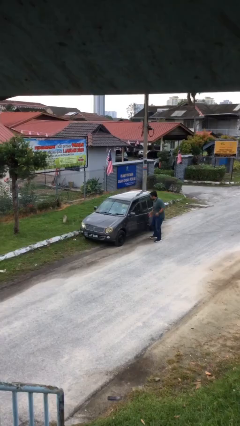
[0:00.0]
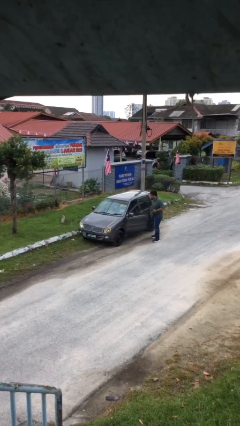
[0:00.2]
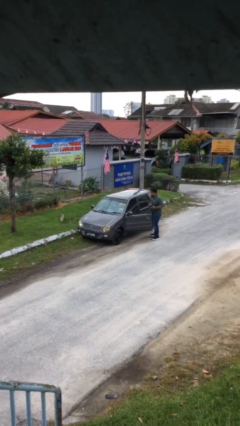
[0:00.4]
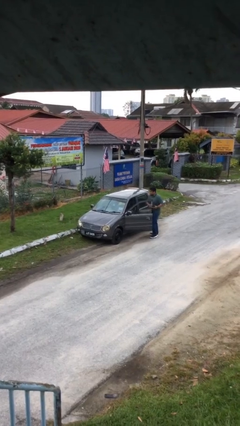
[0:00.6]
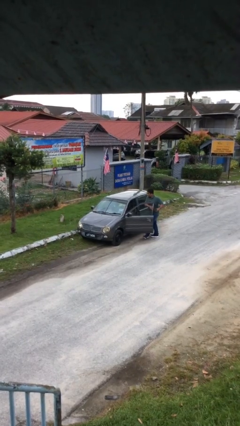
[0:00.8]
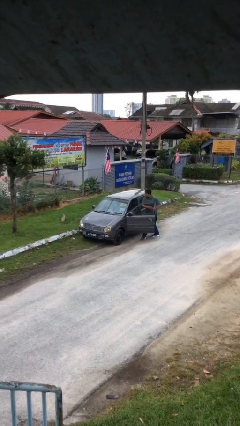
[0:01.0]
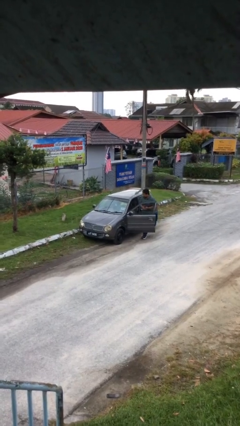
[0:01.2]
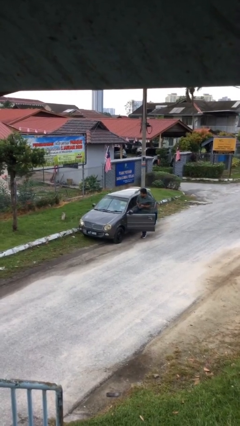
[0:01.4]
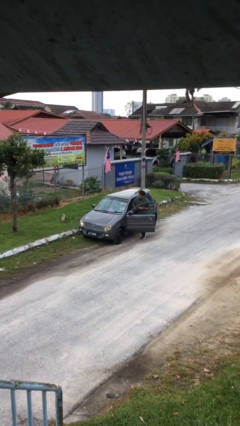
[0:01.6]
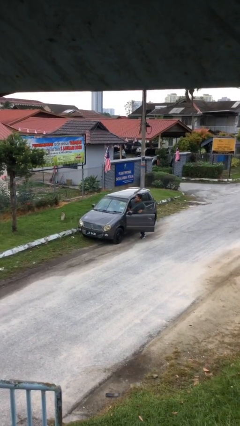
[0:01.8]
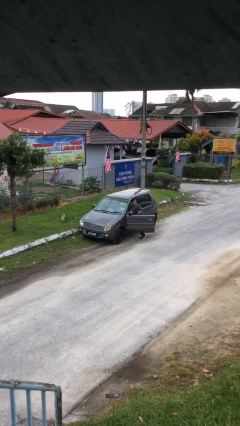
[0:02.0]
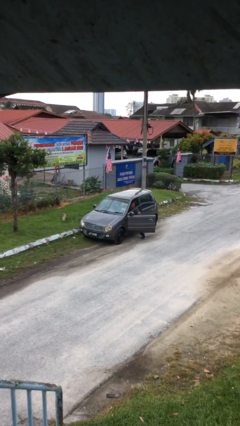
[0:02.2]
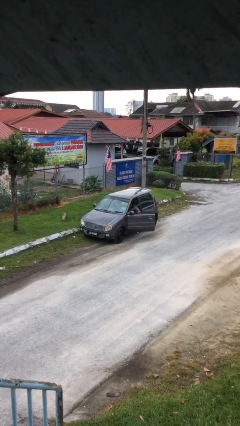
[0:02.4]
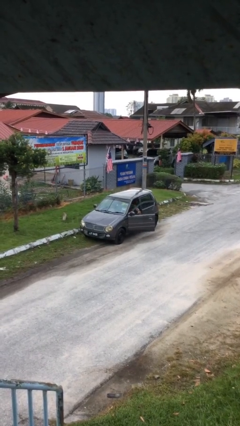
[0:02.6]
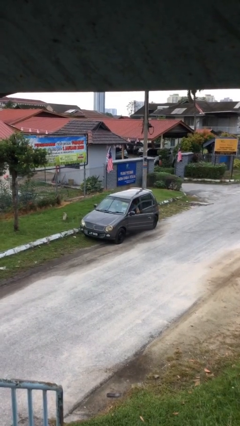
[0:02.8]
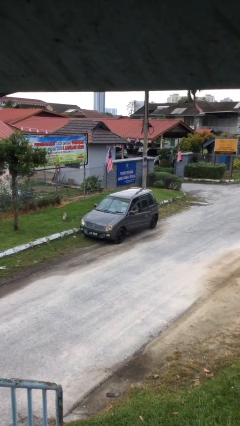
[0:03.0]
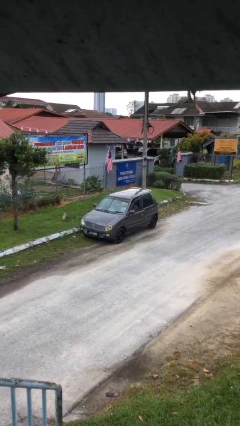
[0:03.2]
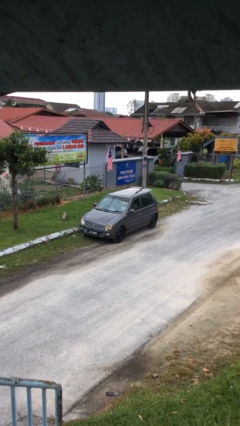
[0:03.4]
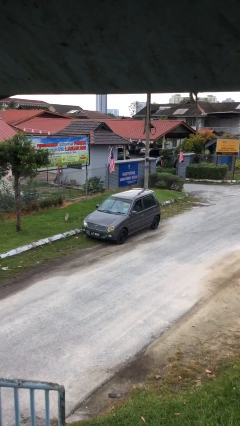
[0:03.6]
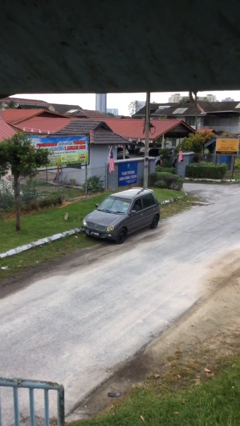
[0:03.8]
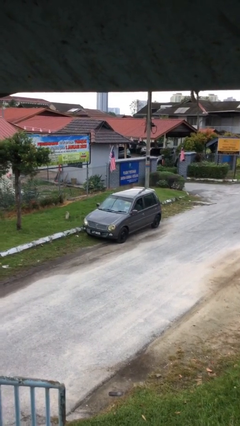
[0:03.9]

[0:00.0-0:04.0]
car picks up person

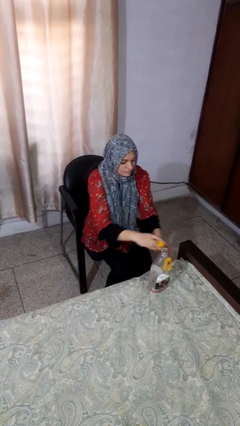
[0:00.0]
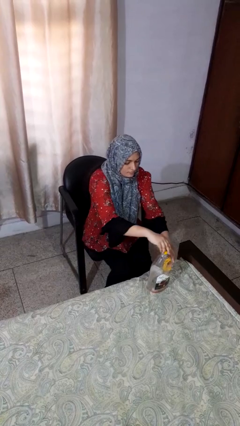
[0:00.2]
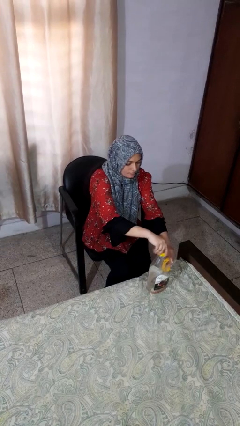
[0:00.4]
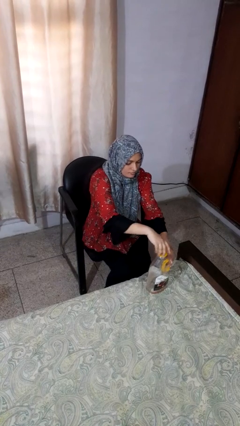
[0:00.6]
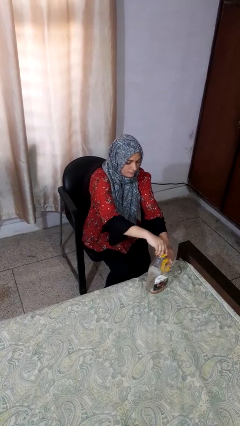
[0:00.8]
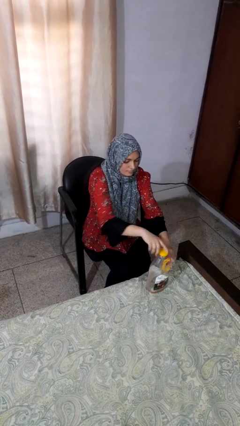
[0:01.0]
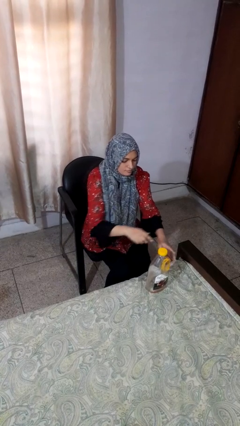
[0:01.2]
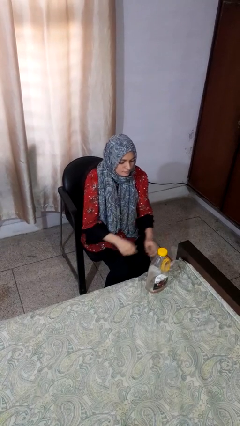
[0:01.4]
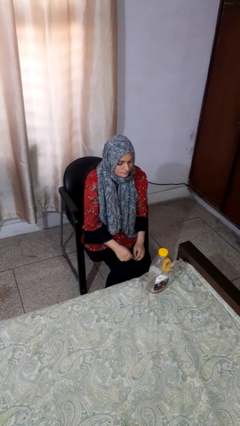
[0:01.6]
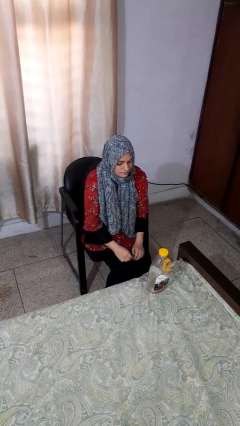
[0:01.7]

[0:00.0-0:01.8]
person screws lid to bottle

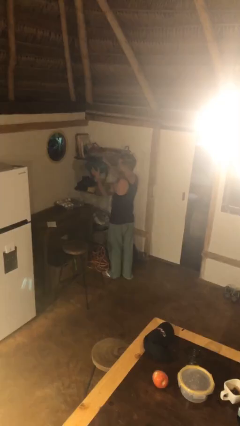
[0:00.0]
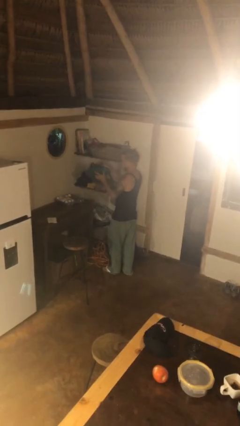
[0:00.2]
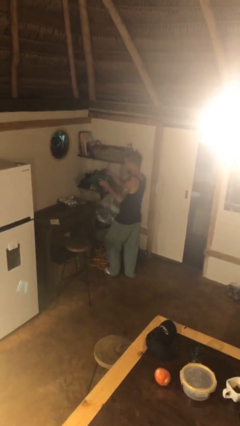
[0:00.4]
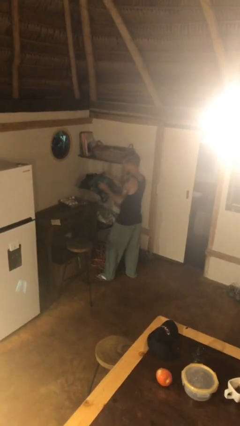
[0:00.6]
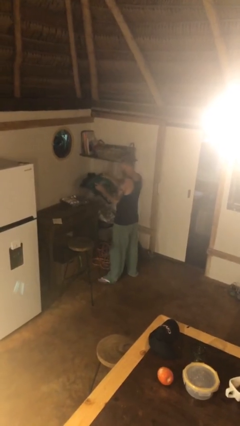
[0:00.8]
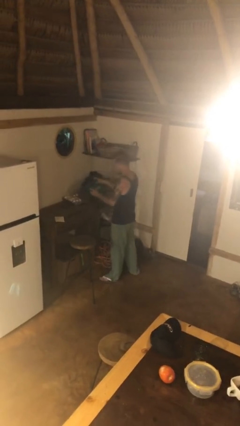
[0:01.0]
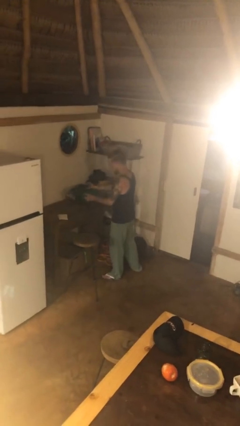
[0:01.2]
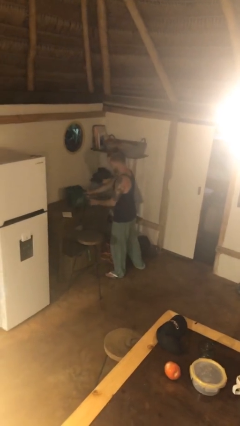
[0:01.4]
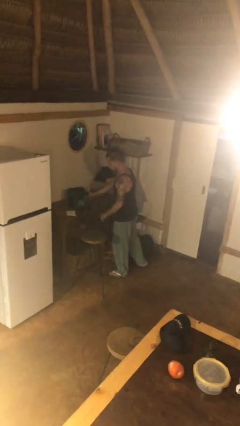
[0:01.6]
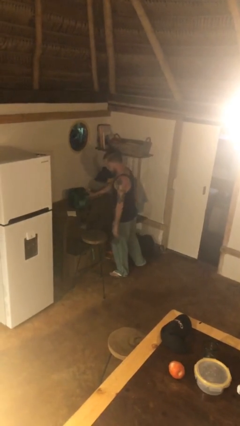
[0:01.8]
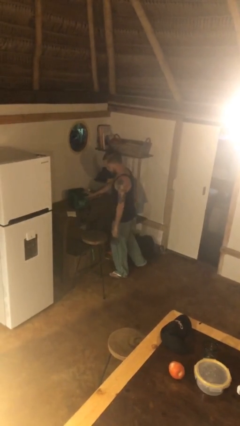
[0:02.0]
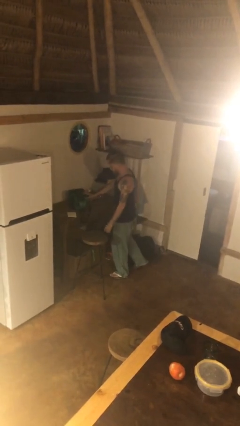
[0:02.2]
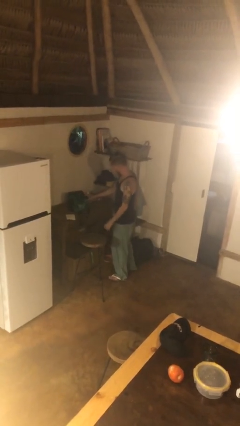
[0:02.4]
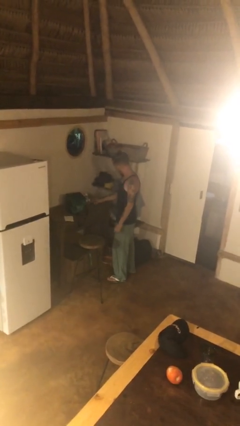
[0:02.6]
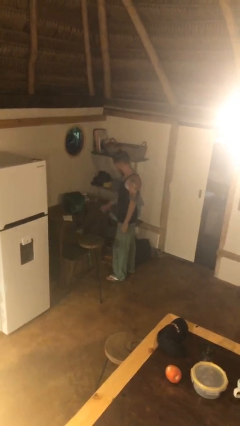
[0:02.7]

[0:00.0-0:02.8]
person puts down object on table

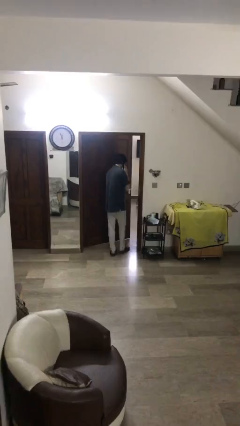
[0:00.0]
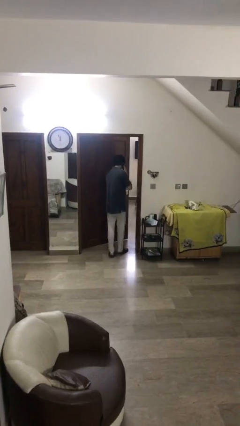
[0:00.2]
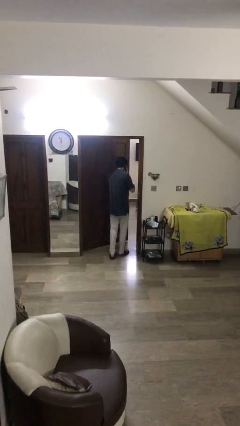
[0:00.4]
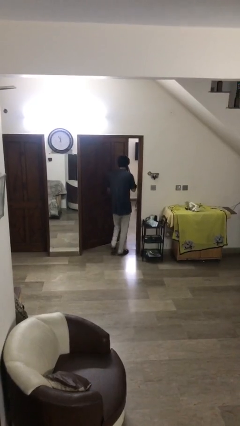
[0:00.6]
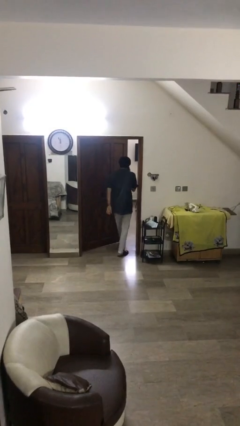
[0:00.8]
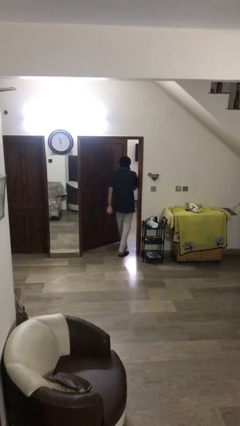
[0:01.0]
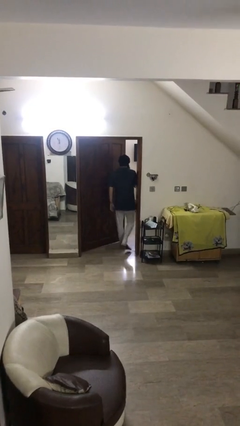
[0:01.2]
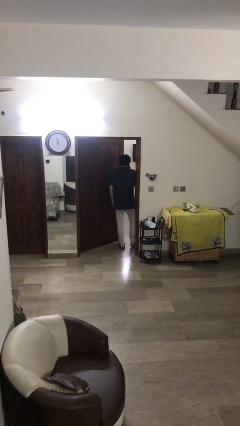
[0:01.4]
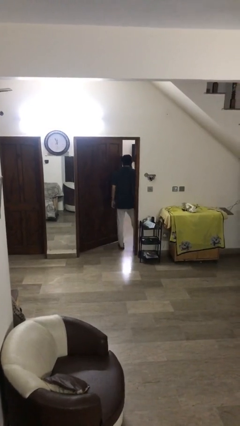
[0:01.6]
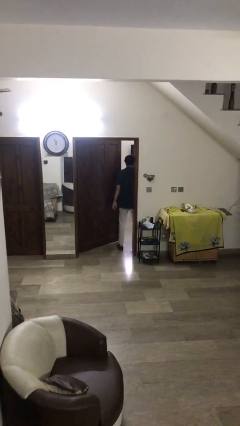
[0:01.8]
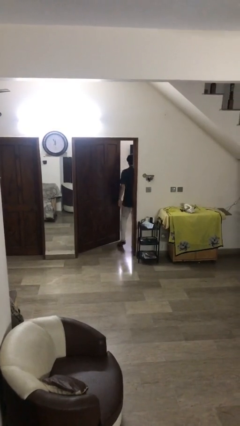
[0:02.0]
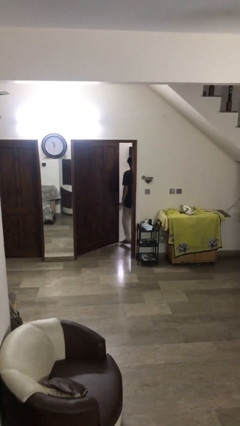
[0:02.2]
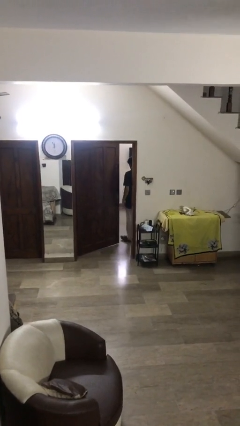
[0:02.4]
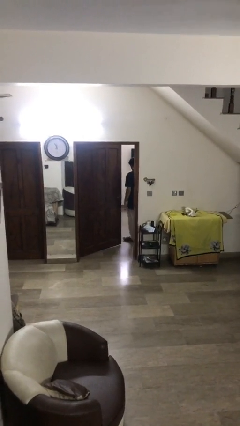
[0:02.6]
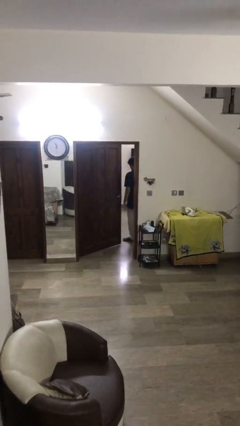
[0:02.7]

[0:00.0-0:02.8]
person exits scene through structure

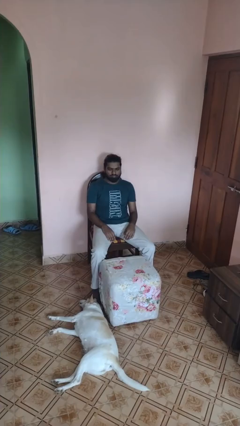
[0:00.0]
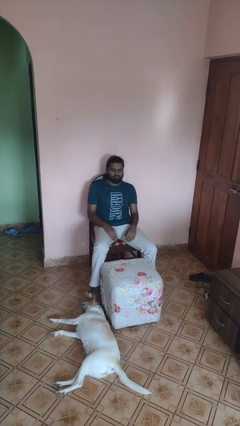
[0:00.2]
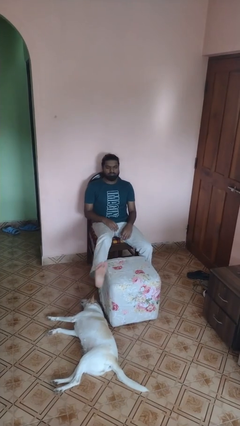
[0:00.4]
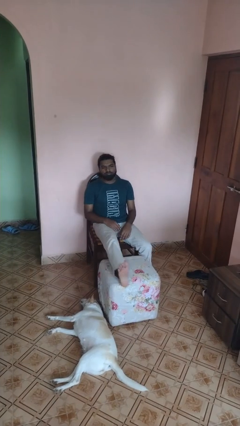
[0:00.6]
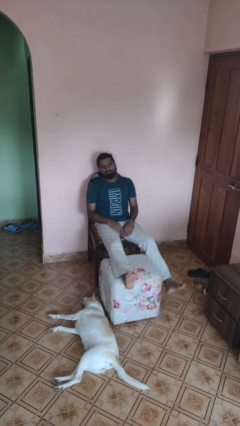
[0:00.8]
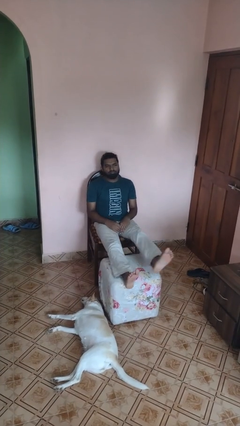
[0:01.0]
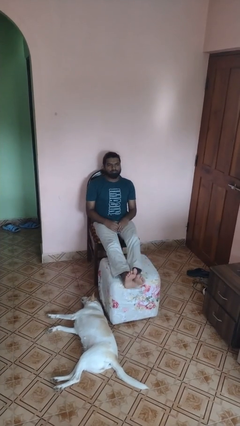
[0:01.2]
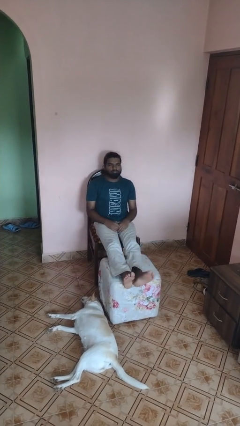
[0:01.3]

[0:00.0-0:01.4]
person puts feet up

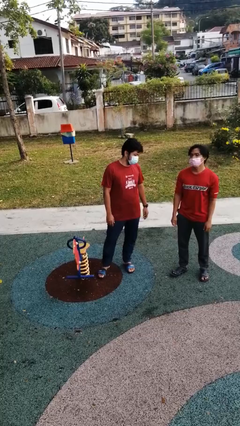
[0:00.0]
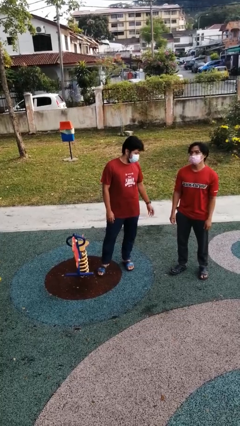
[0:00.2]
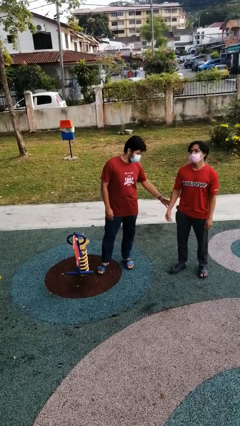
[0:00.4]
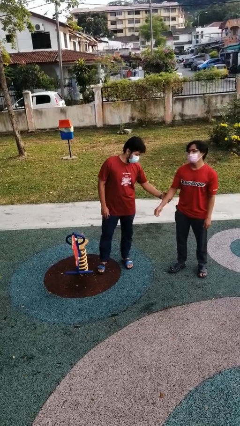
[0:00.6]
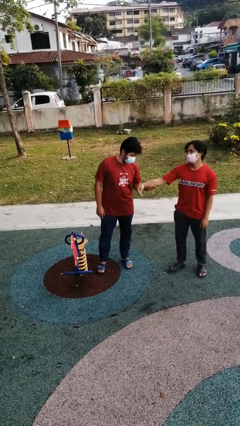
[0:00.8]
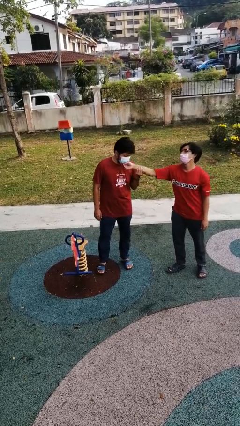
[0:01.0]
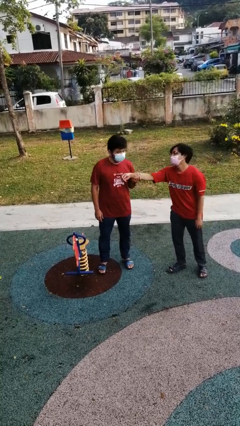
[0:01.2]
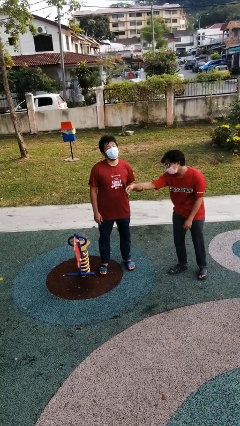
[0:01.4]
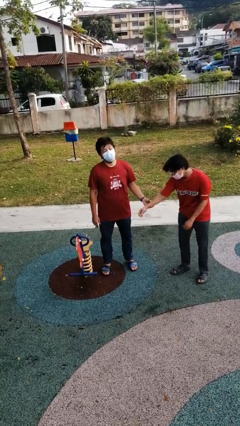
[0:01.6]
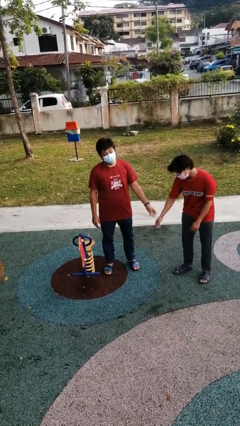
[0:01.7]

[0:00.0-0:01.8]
person grabs person by forearm

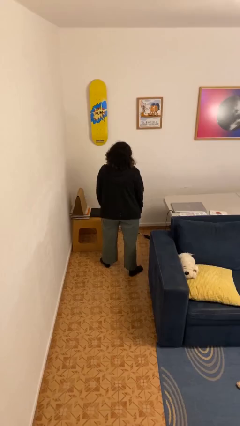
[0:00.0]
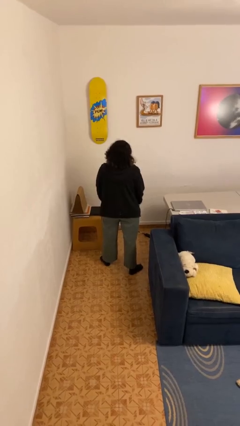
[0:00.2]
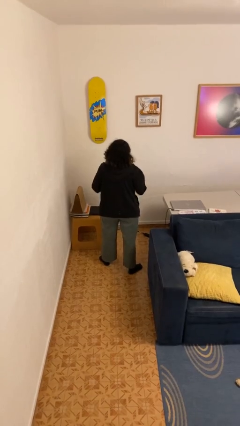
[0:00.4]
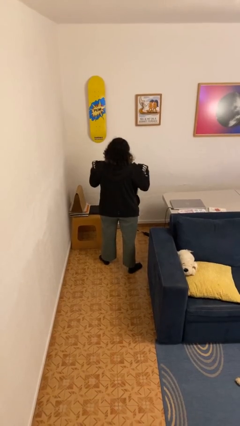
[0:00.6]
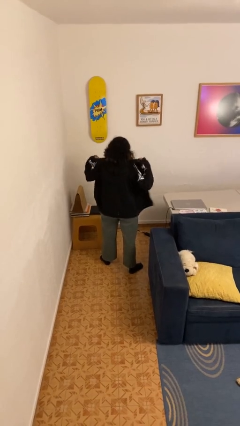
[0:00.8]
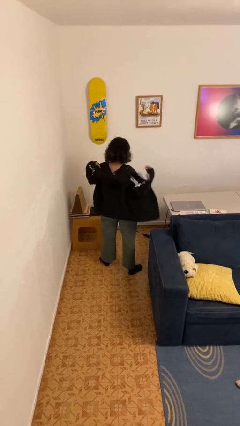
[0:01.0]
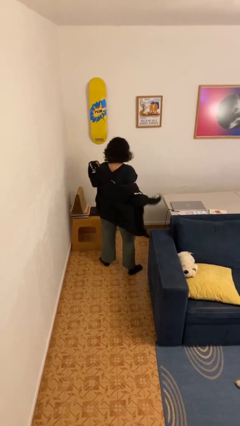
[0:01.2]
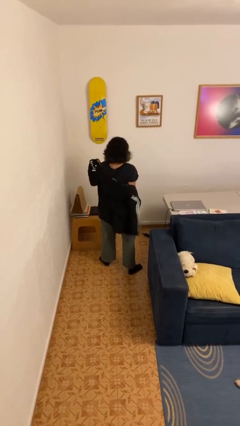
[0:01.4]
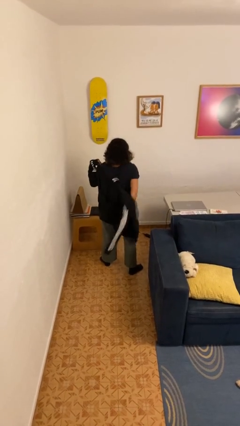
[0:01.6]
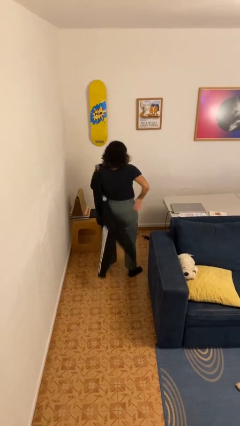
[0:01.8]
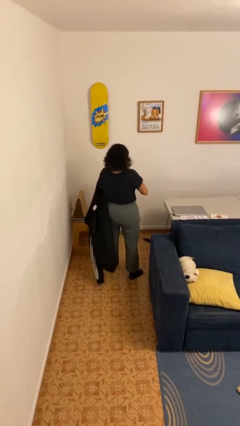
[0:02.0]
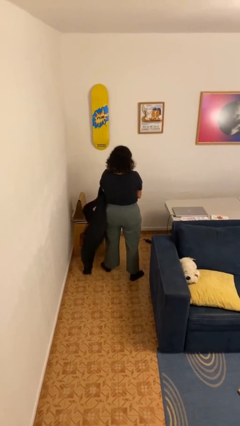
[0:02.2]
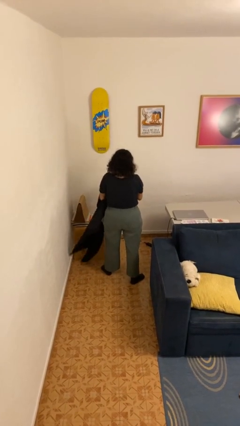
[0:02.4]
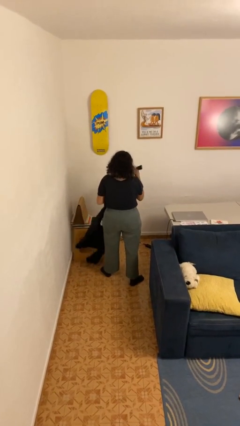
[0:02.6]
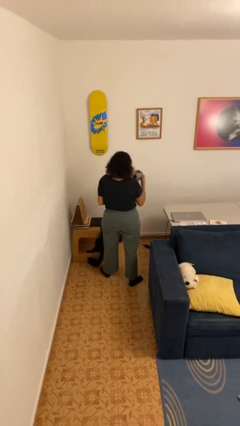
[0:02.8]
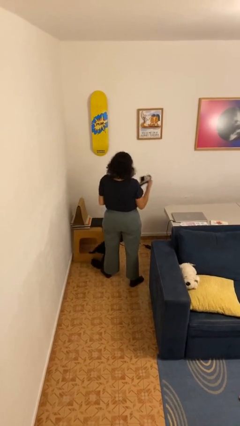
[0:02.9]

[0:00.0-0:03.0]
person takes off hoodie
